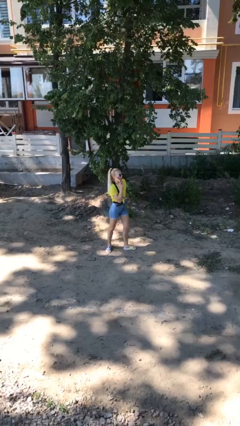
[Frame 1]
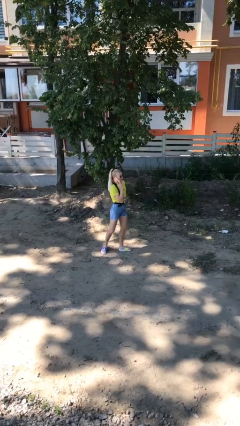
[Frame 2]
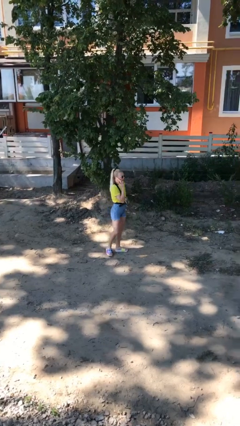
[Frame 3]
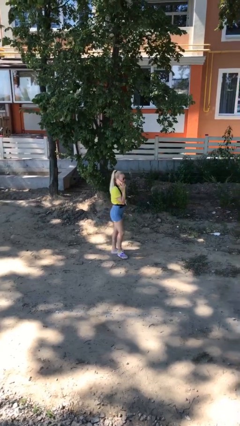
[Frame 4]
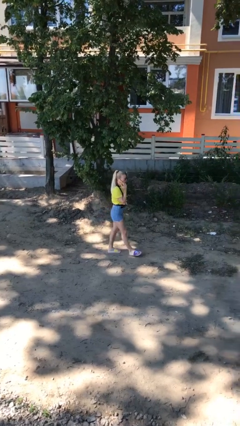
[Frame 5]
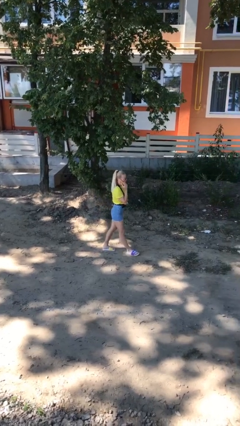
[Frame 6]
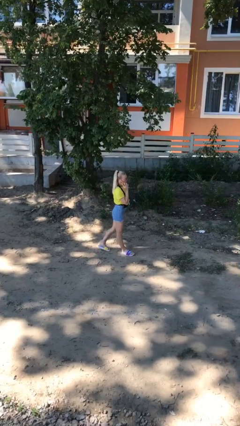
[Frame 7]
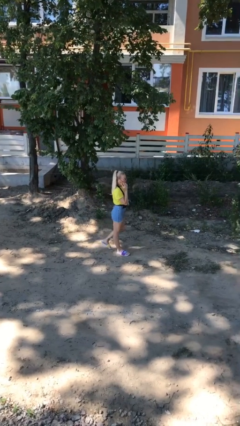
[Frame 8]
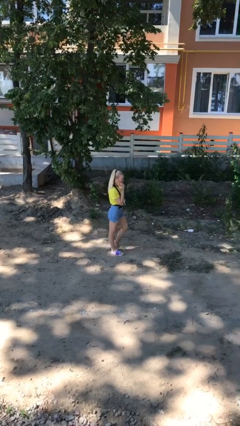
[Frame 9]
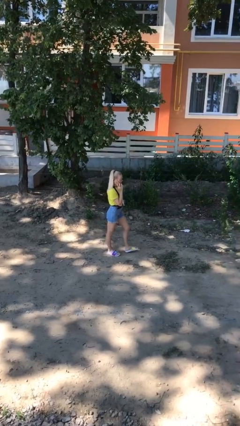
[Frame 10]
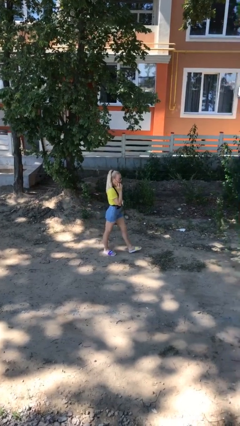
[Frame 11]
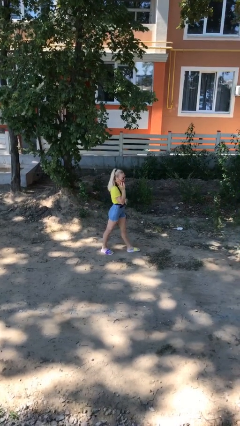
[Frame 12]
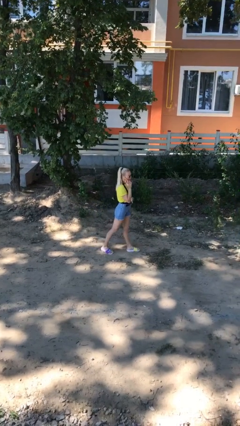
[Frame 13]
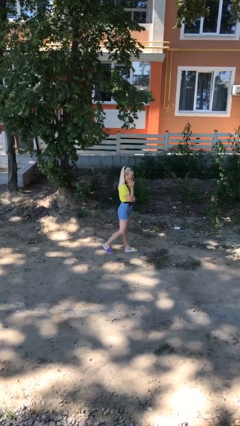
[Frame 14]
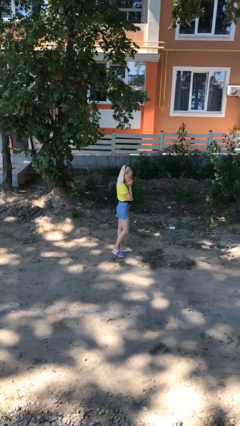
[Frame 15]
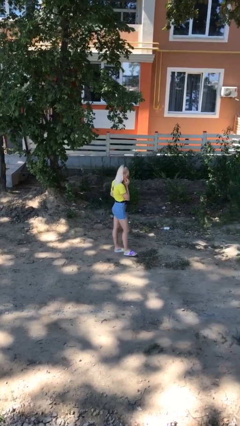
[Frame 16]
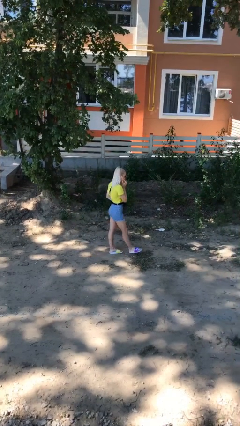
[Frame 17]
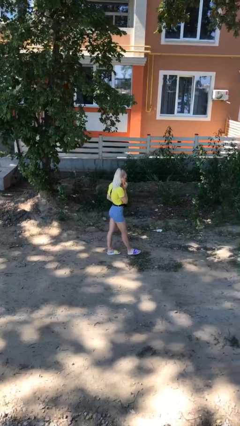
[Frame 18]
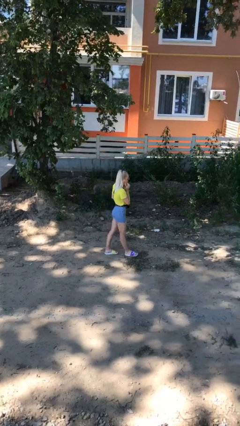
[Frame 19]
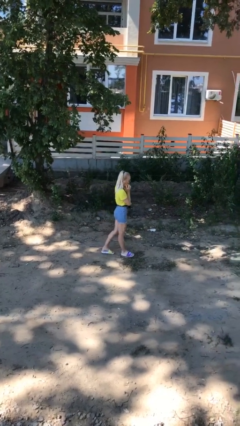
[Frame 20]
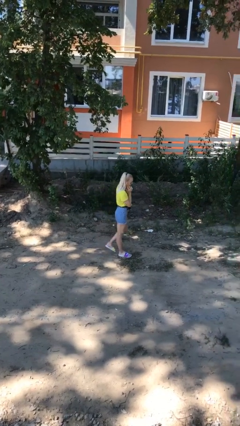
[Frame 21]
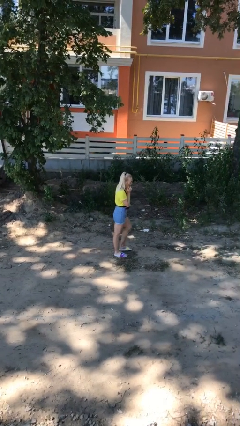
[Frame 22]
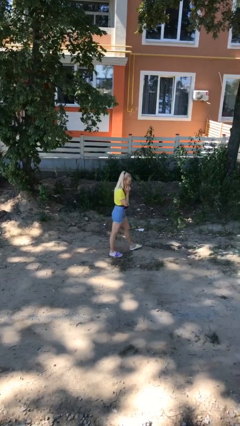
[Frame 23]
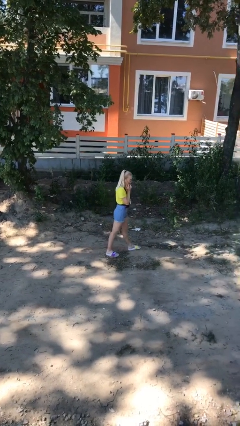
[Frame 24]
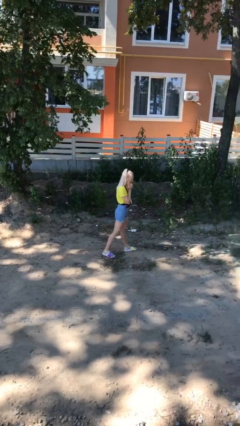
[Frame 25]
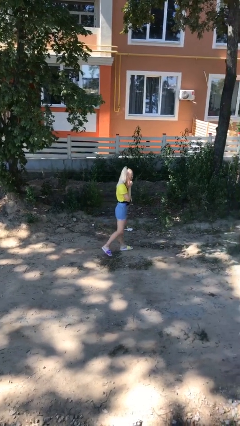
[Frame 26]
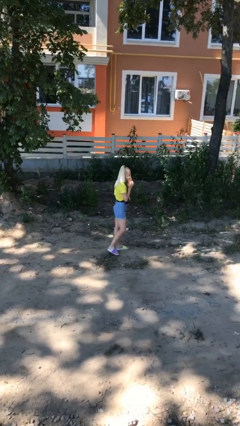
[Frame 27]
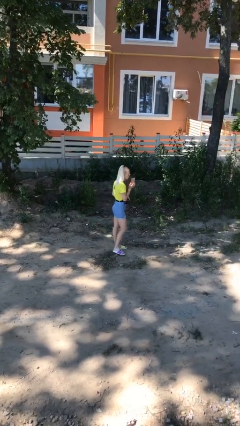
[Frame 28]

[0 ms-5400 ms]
person talks on phone

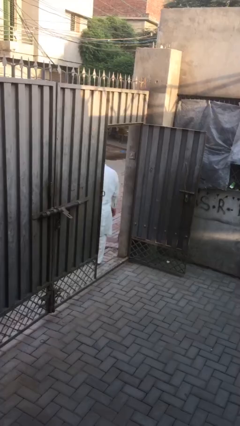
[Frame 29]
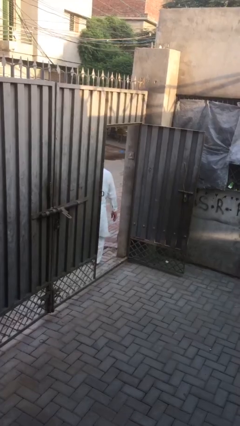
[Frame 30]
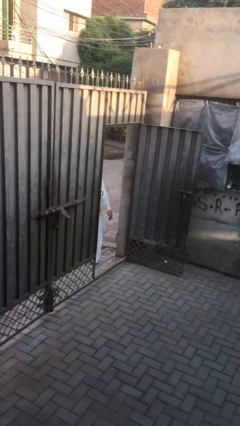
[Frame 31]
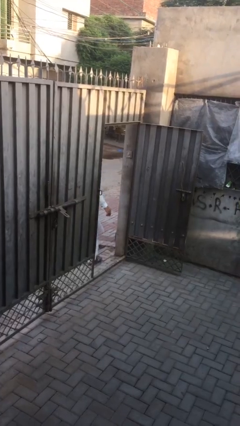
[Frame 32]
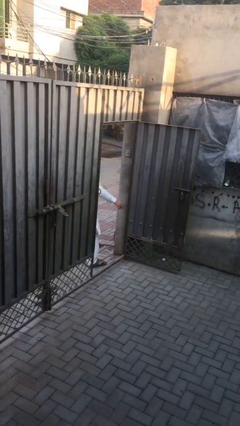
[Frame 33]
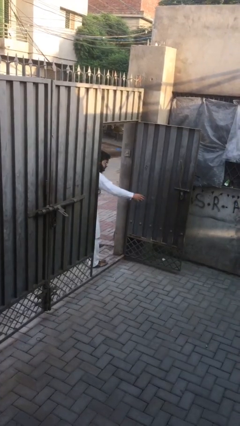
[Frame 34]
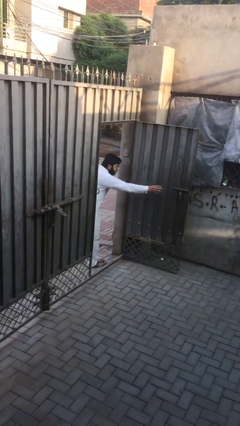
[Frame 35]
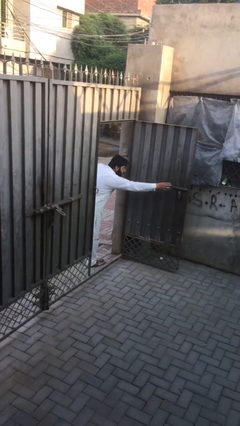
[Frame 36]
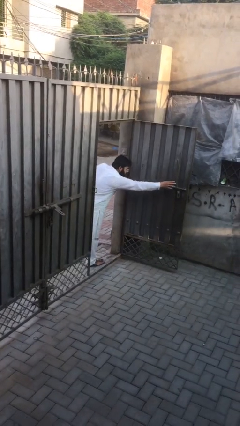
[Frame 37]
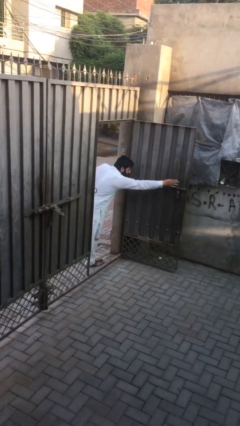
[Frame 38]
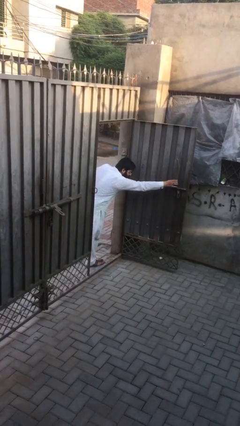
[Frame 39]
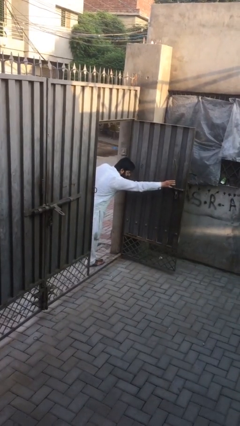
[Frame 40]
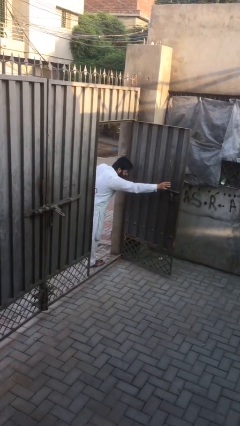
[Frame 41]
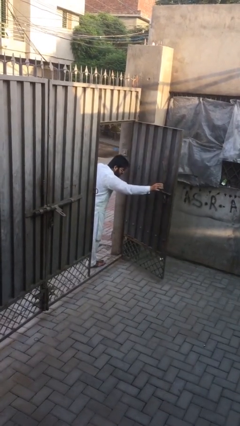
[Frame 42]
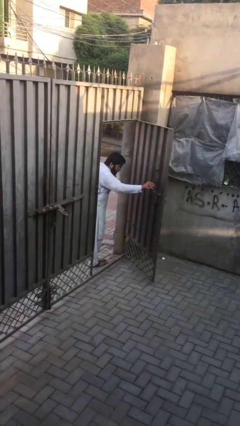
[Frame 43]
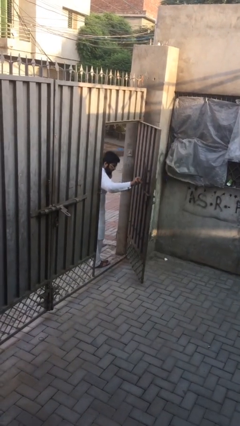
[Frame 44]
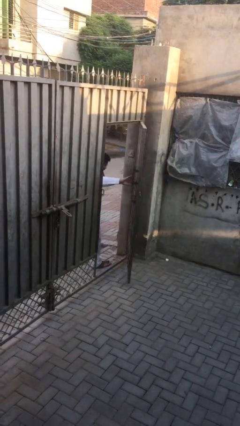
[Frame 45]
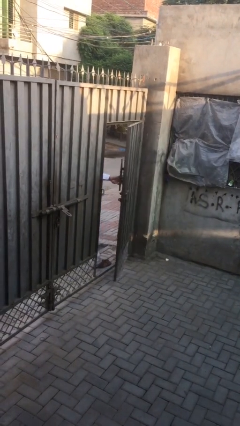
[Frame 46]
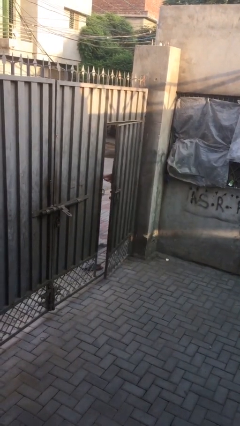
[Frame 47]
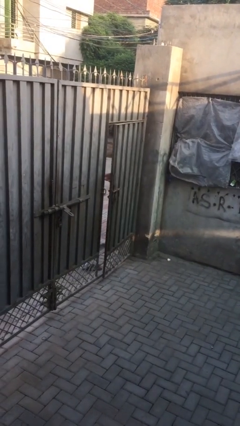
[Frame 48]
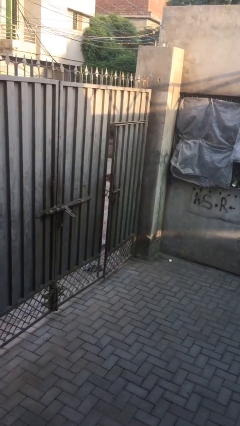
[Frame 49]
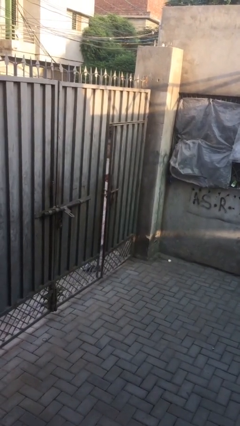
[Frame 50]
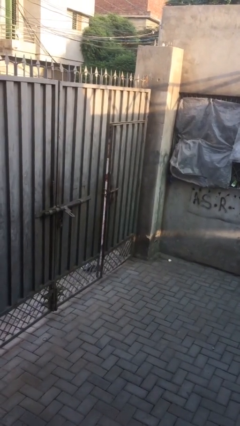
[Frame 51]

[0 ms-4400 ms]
person closes facility door

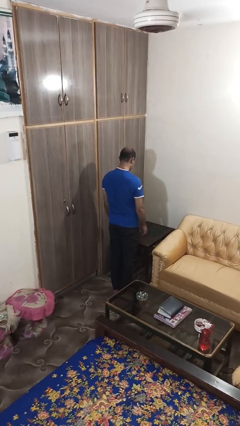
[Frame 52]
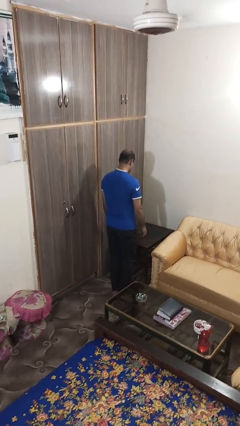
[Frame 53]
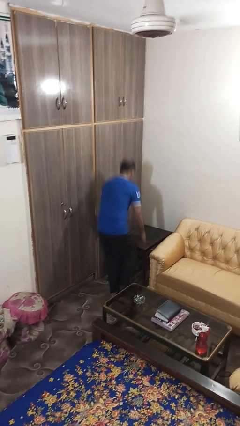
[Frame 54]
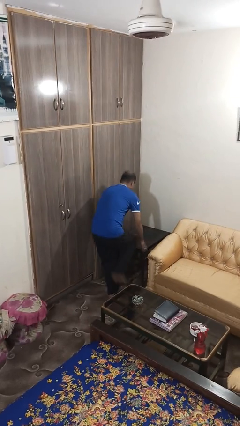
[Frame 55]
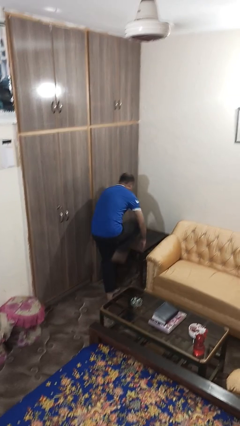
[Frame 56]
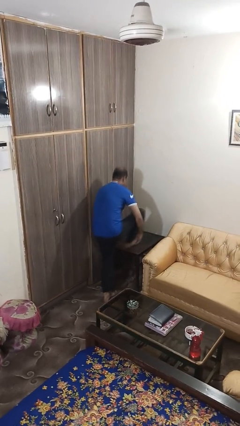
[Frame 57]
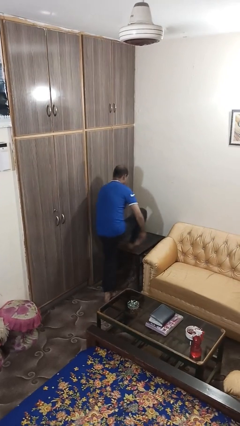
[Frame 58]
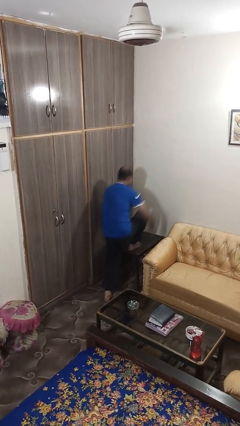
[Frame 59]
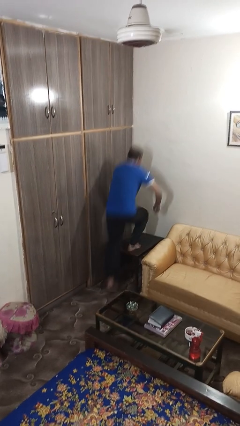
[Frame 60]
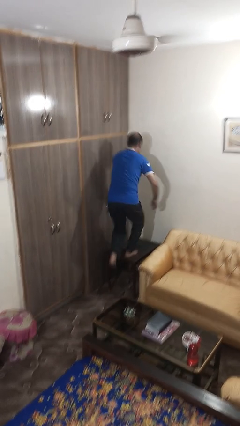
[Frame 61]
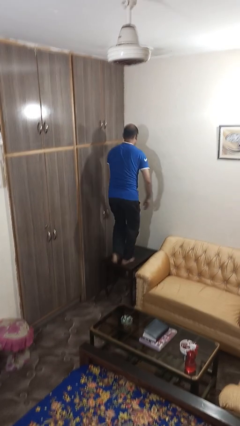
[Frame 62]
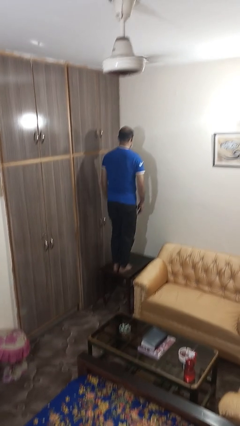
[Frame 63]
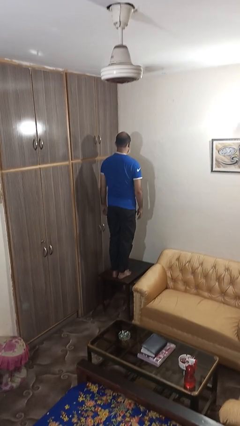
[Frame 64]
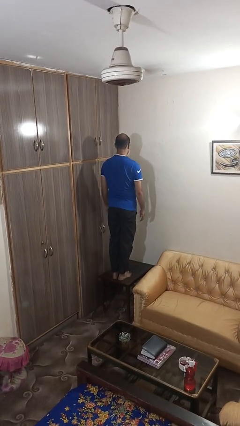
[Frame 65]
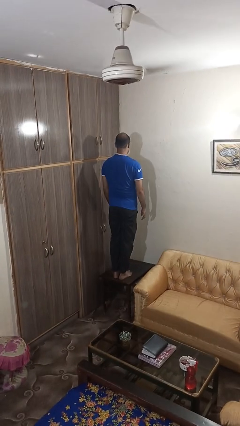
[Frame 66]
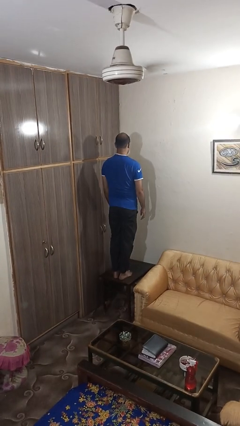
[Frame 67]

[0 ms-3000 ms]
person climbs on table

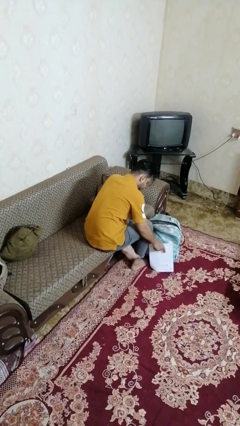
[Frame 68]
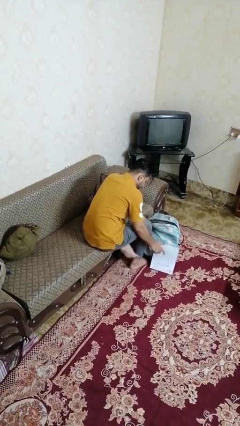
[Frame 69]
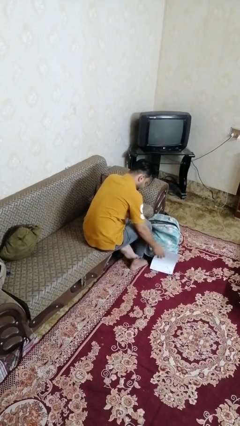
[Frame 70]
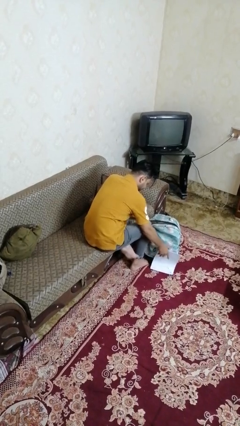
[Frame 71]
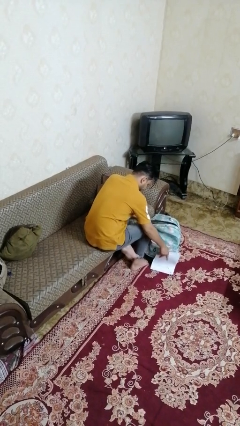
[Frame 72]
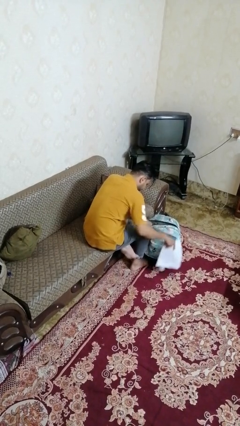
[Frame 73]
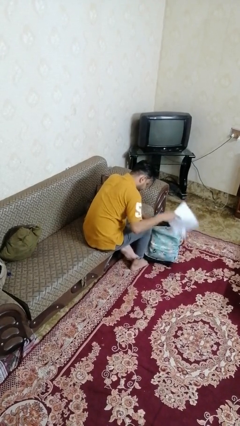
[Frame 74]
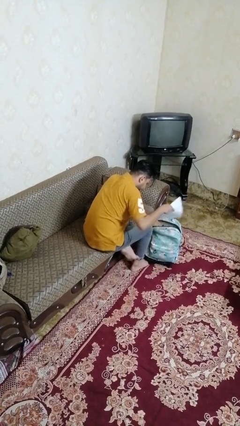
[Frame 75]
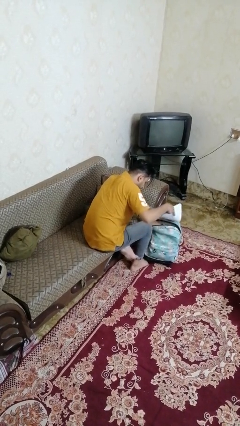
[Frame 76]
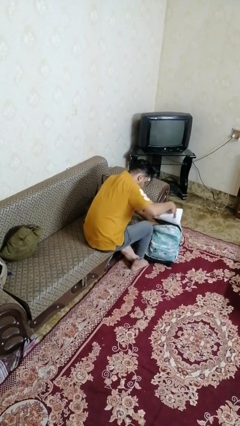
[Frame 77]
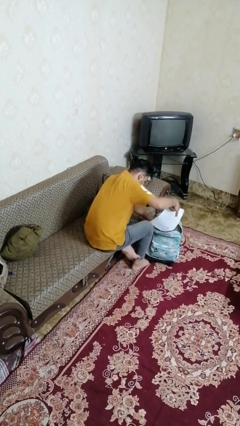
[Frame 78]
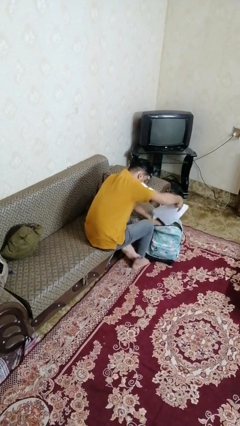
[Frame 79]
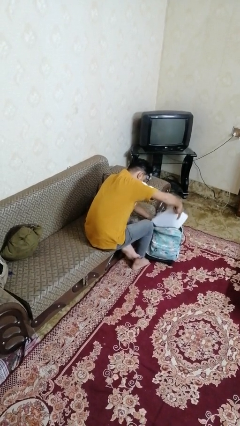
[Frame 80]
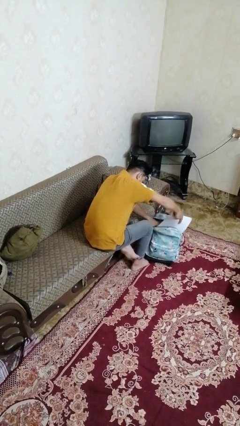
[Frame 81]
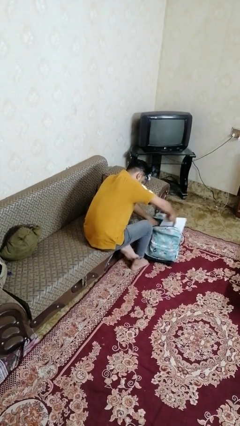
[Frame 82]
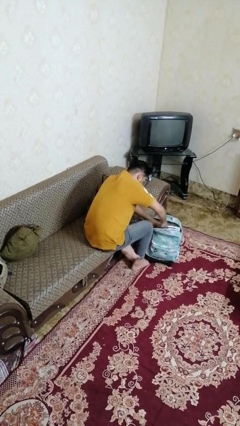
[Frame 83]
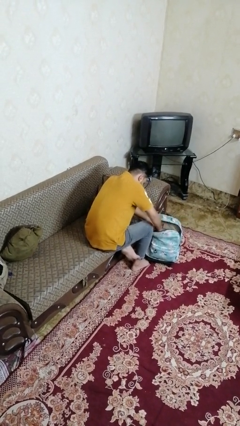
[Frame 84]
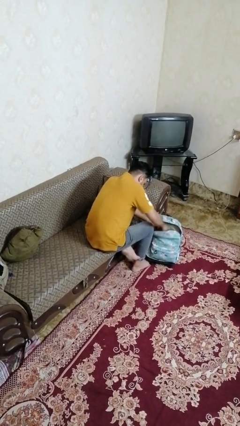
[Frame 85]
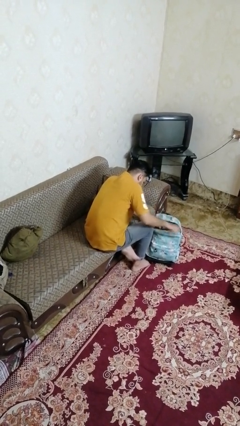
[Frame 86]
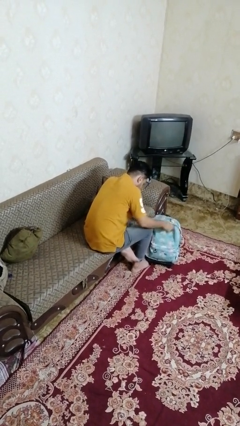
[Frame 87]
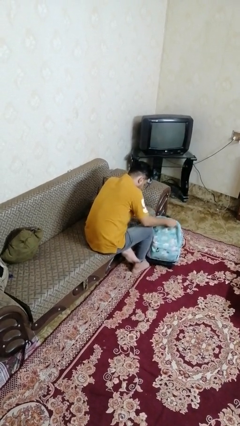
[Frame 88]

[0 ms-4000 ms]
person puts object into bag

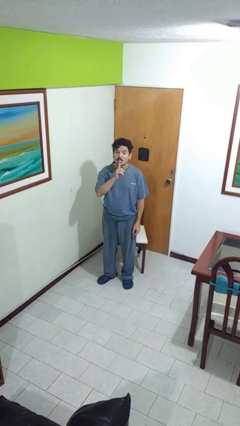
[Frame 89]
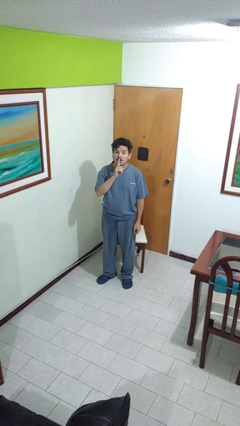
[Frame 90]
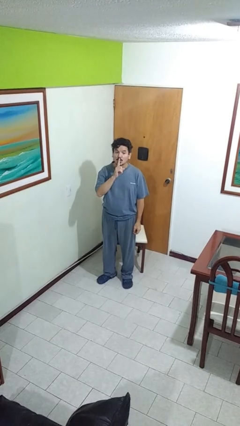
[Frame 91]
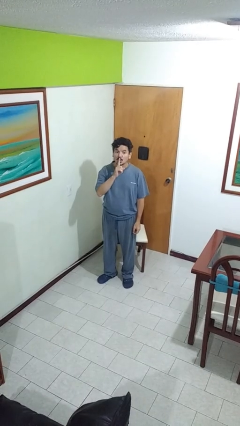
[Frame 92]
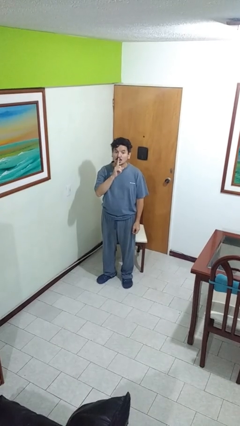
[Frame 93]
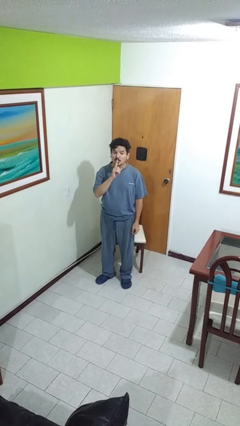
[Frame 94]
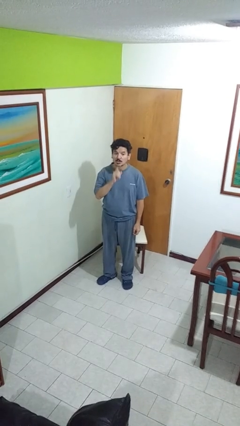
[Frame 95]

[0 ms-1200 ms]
person gestures be quiet
